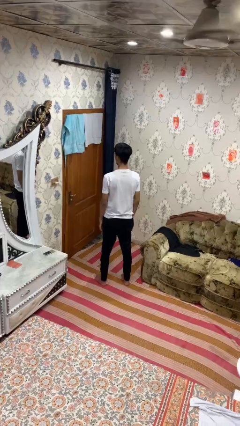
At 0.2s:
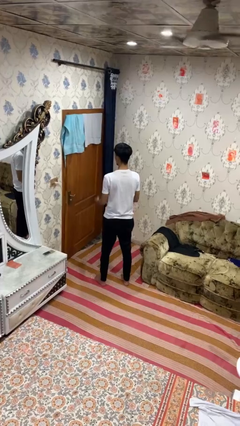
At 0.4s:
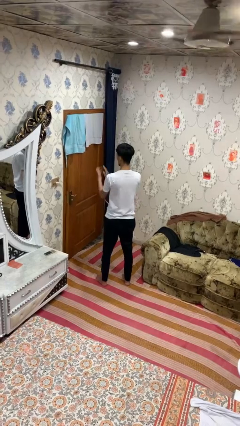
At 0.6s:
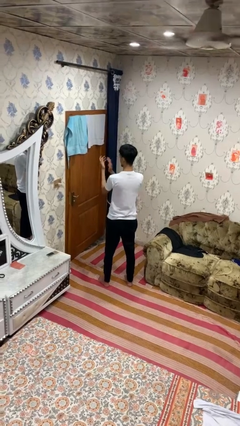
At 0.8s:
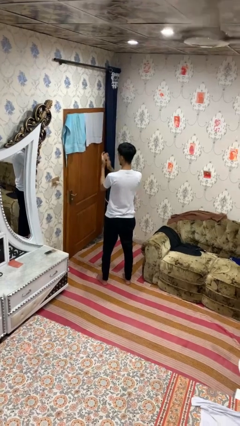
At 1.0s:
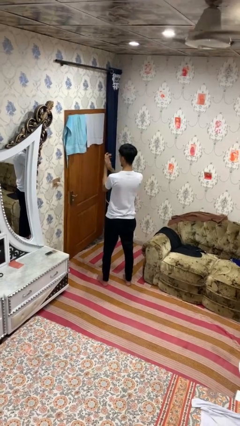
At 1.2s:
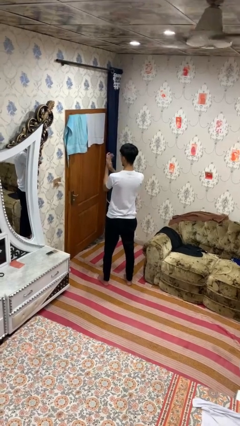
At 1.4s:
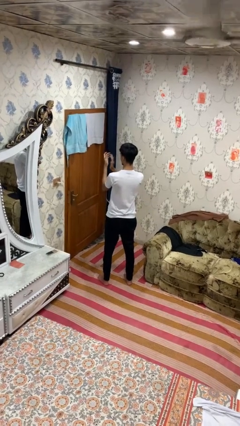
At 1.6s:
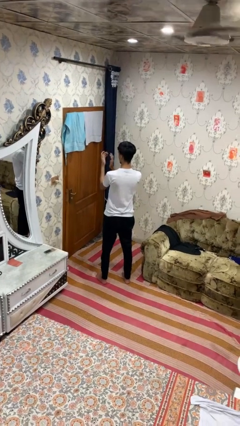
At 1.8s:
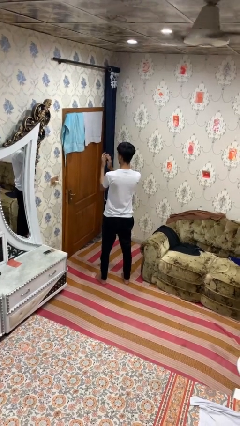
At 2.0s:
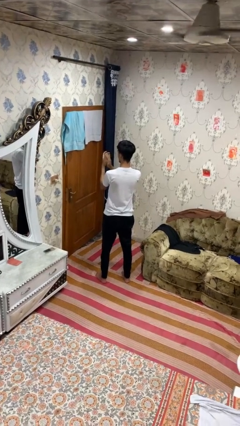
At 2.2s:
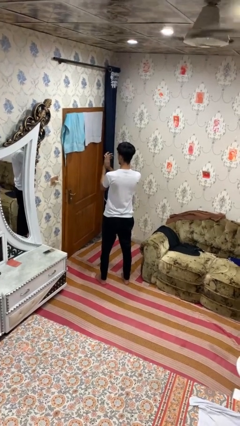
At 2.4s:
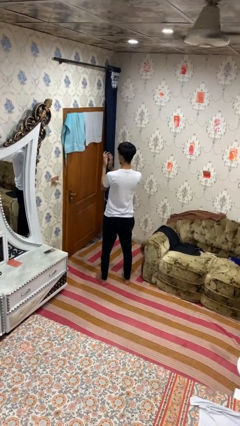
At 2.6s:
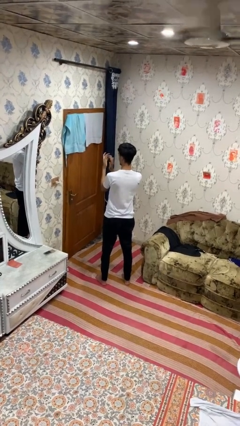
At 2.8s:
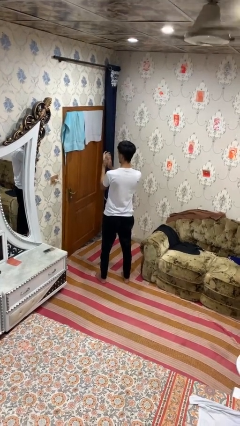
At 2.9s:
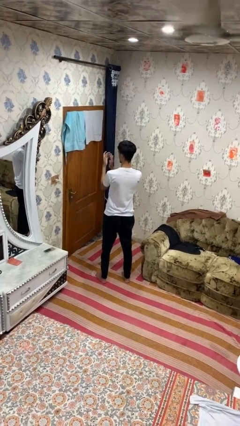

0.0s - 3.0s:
person claps hands

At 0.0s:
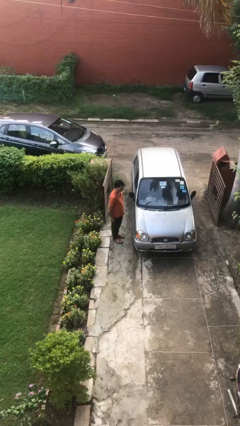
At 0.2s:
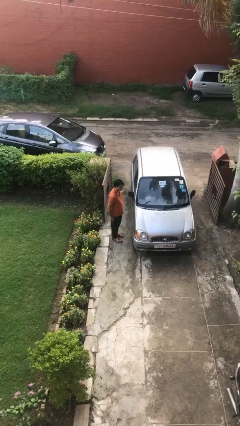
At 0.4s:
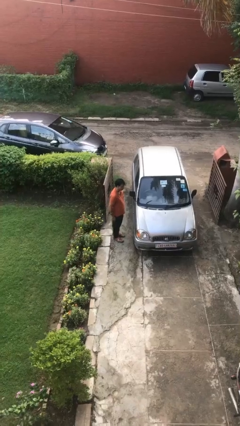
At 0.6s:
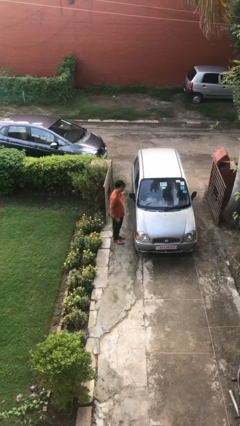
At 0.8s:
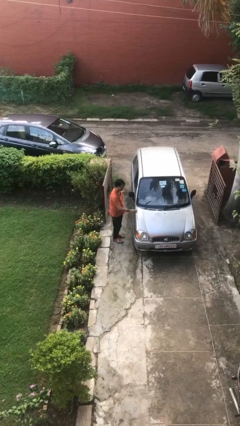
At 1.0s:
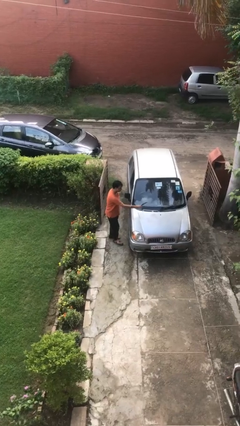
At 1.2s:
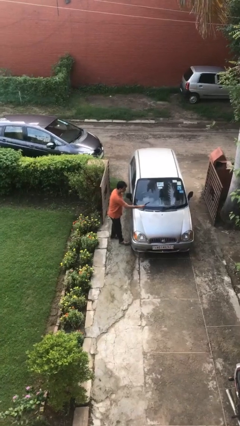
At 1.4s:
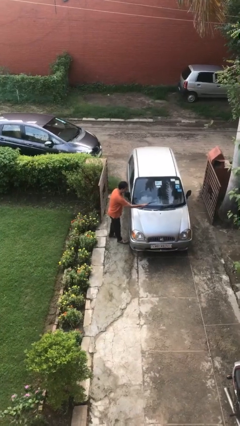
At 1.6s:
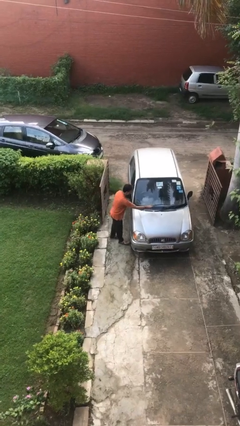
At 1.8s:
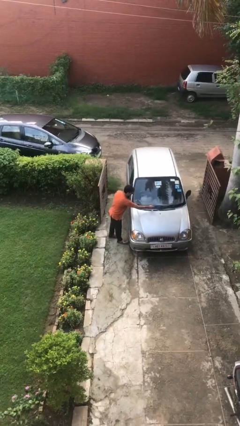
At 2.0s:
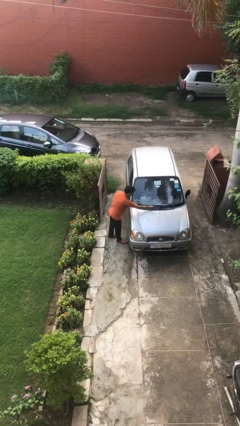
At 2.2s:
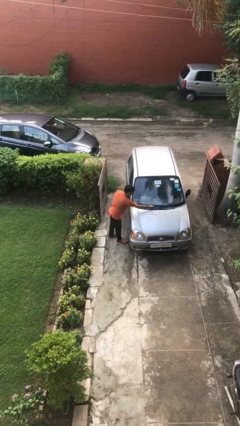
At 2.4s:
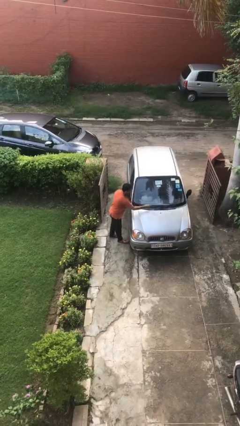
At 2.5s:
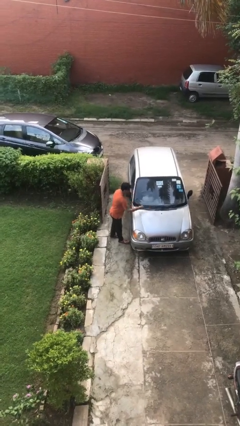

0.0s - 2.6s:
person flips down car wipers

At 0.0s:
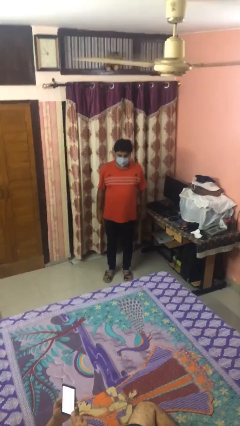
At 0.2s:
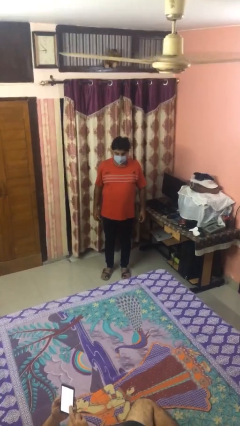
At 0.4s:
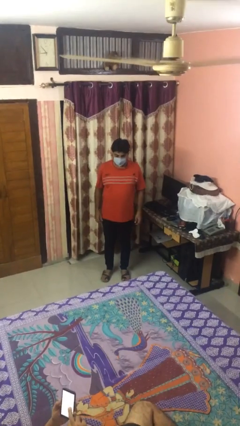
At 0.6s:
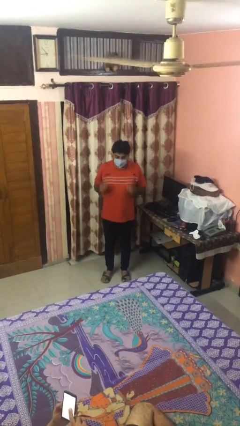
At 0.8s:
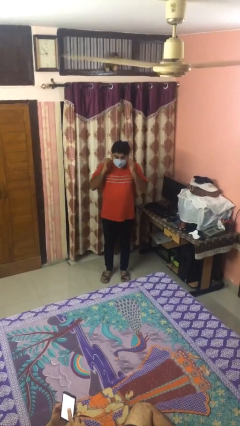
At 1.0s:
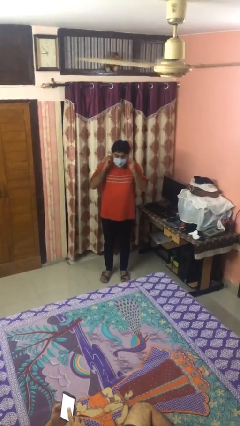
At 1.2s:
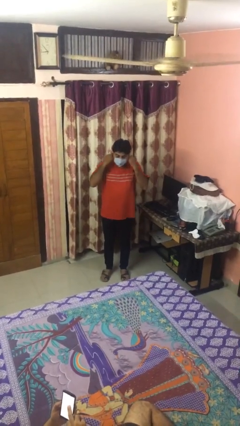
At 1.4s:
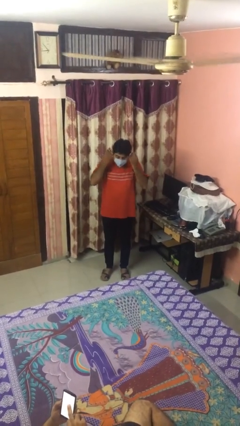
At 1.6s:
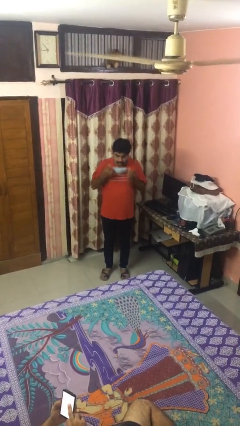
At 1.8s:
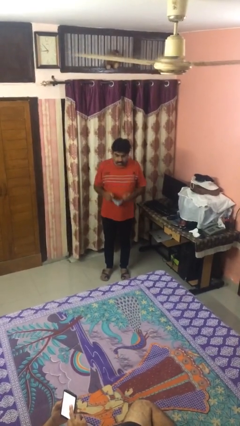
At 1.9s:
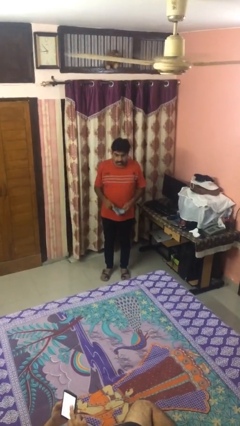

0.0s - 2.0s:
person takes off facemask

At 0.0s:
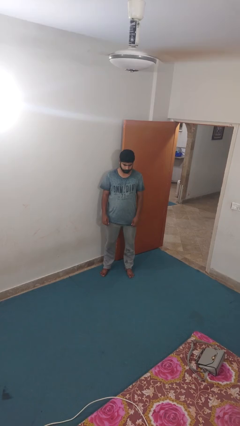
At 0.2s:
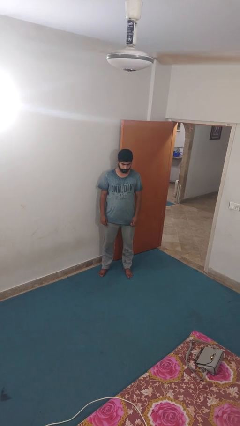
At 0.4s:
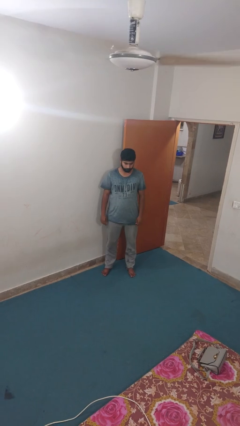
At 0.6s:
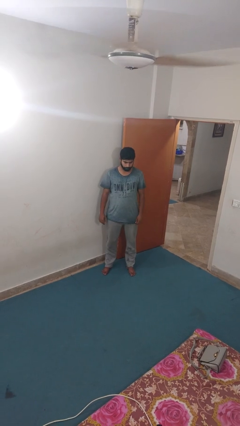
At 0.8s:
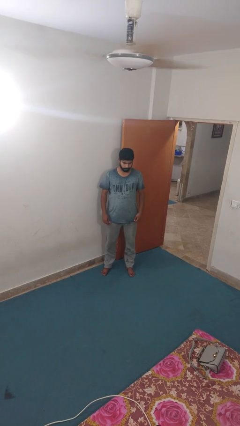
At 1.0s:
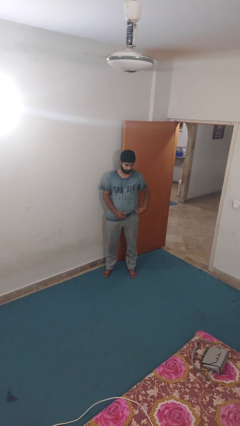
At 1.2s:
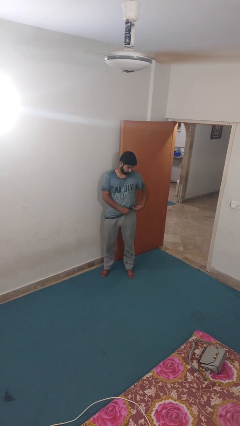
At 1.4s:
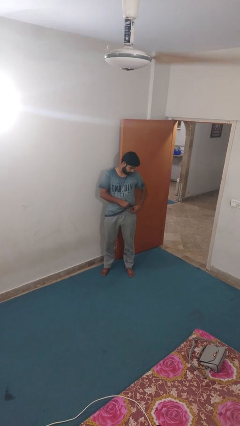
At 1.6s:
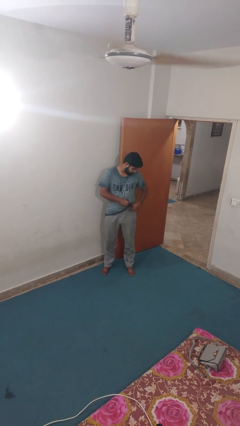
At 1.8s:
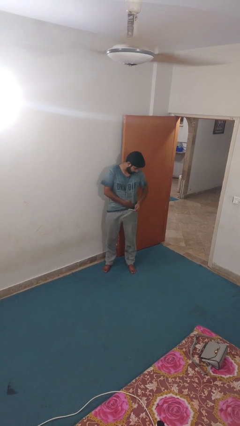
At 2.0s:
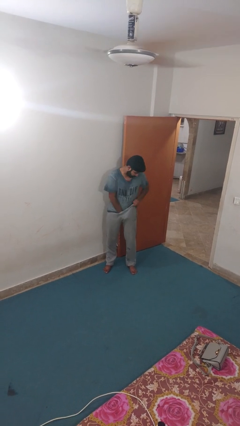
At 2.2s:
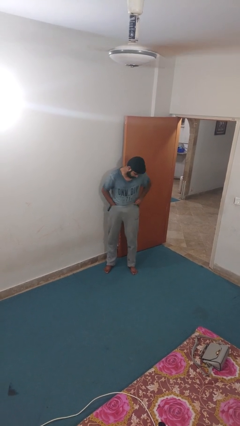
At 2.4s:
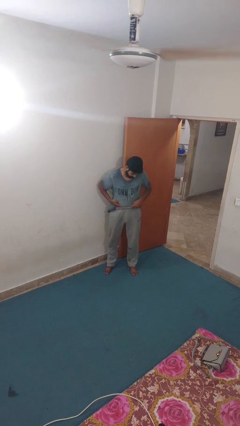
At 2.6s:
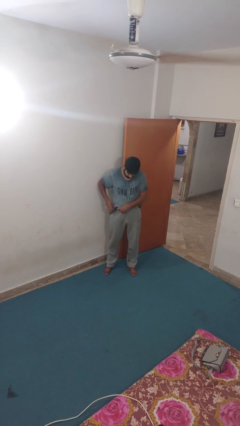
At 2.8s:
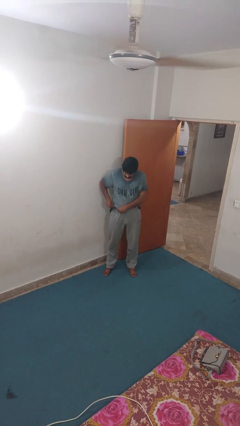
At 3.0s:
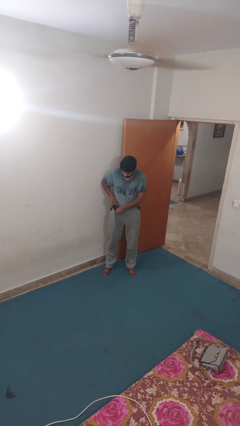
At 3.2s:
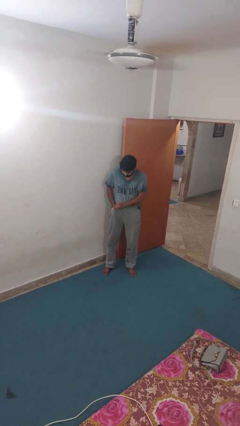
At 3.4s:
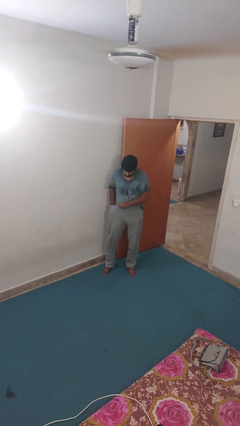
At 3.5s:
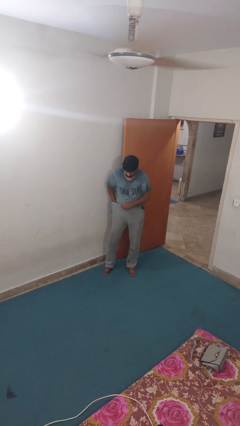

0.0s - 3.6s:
person tucks in shirt

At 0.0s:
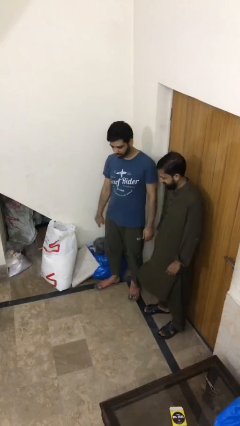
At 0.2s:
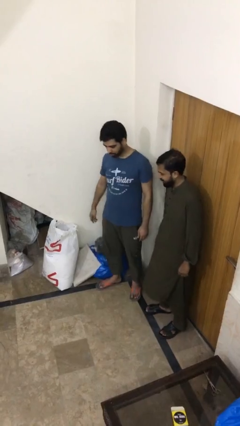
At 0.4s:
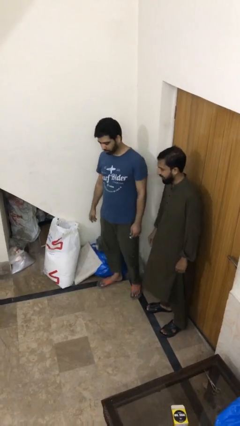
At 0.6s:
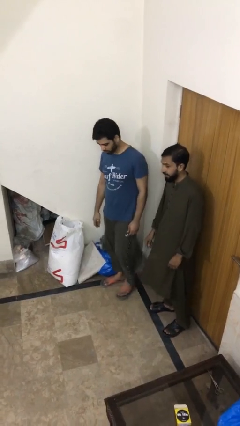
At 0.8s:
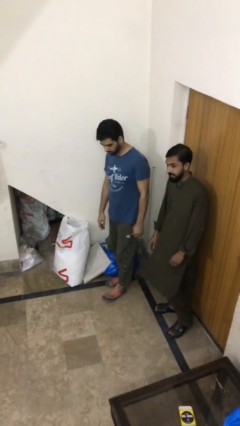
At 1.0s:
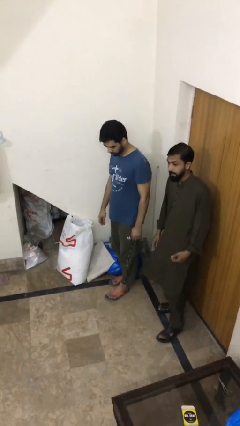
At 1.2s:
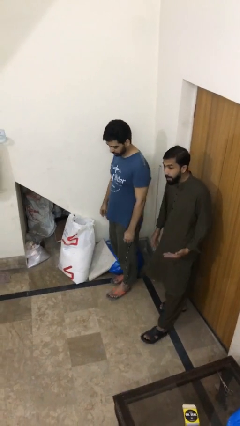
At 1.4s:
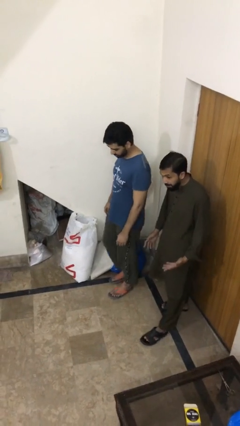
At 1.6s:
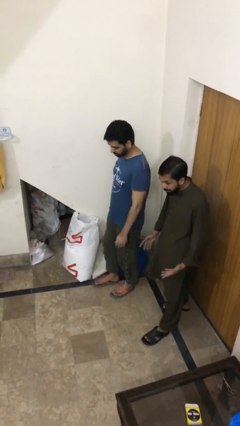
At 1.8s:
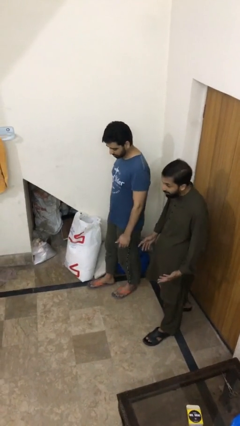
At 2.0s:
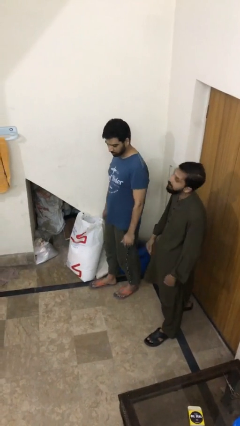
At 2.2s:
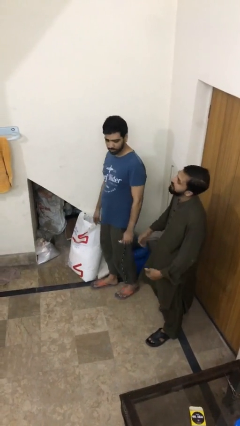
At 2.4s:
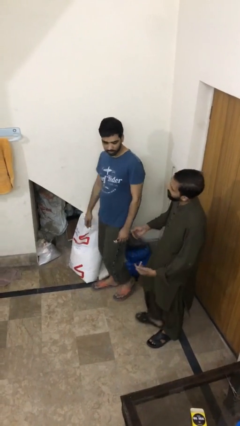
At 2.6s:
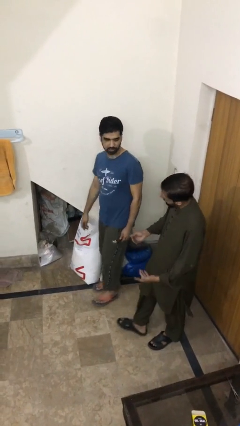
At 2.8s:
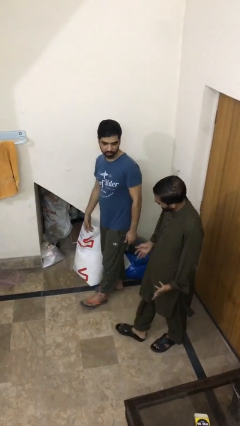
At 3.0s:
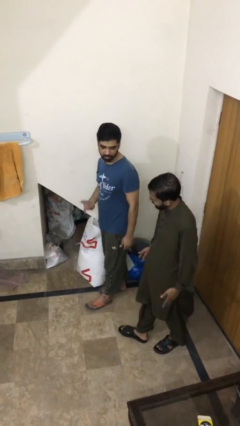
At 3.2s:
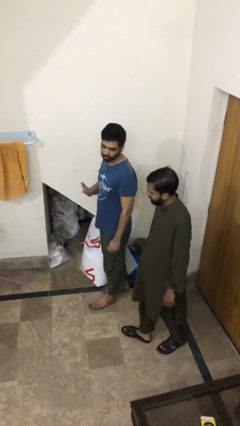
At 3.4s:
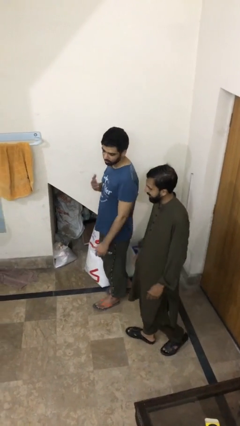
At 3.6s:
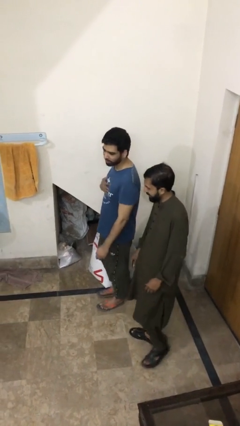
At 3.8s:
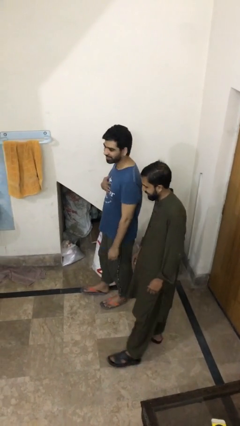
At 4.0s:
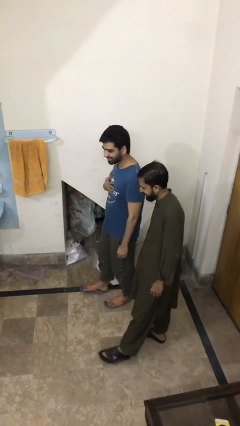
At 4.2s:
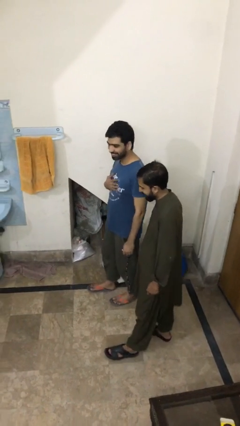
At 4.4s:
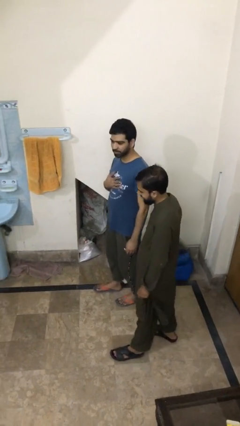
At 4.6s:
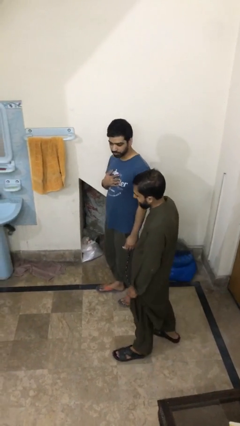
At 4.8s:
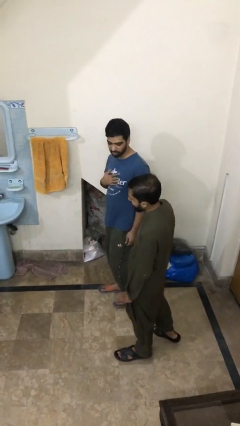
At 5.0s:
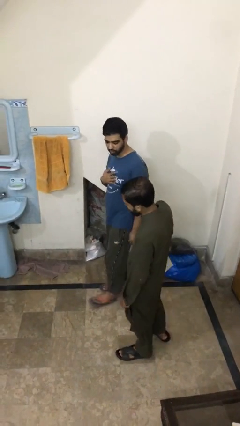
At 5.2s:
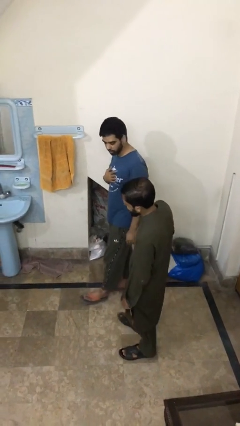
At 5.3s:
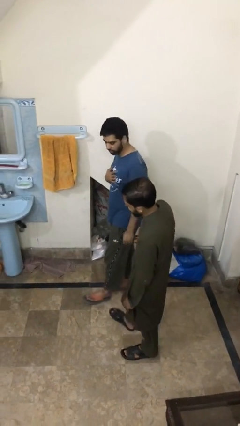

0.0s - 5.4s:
person talks to person

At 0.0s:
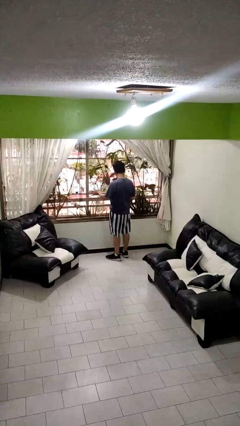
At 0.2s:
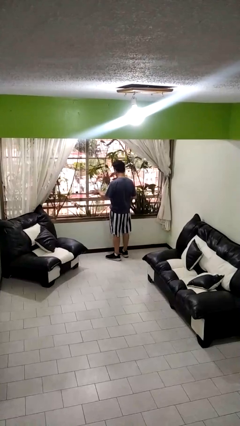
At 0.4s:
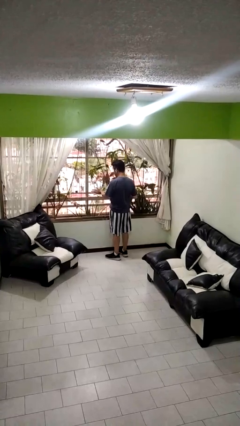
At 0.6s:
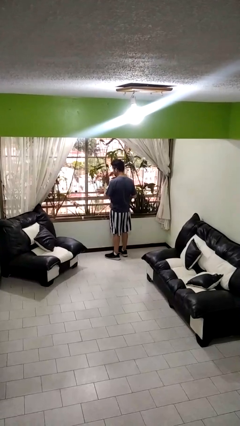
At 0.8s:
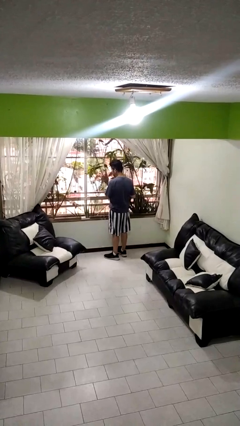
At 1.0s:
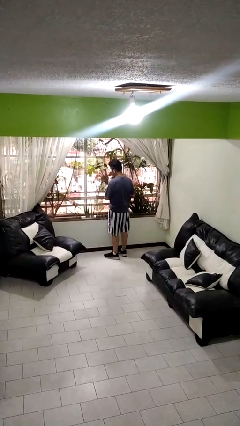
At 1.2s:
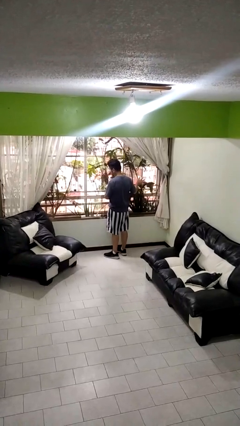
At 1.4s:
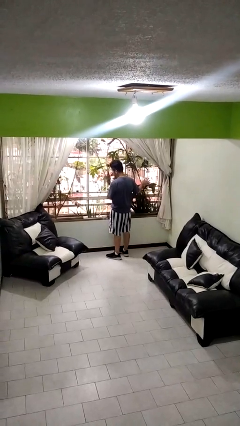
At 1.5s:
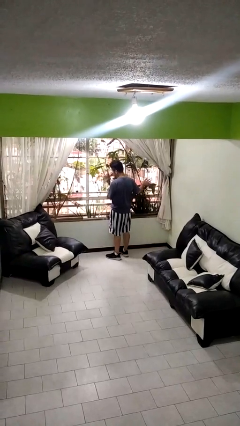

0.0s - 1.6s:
person opens home window
